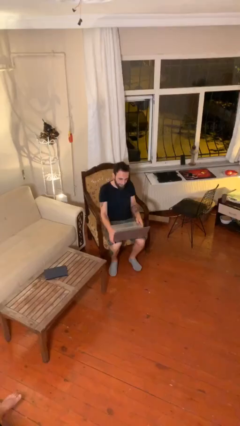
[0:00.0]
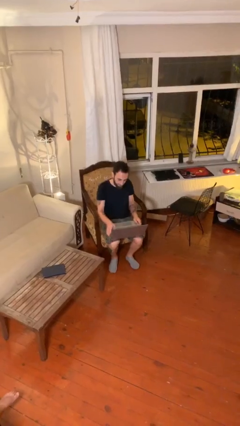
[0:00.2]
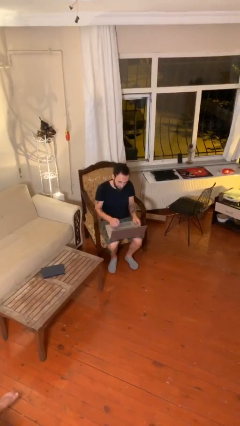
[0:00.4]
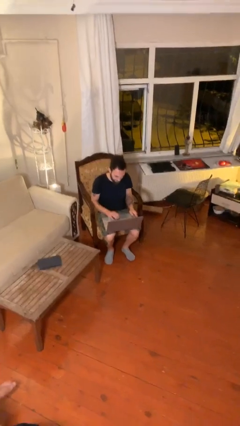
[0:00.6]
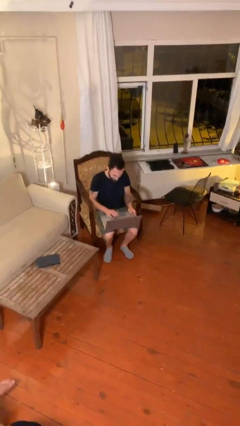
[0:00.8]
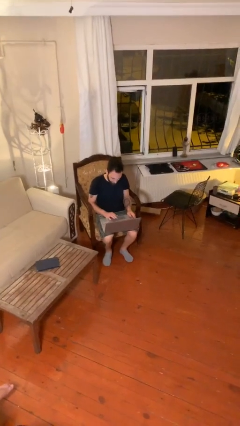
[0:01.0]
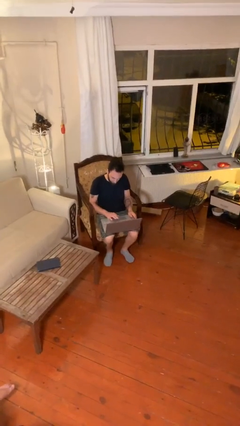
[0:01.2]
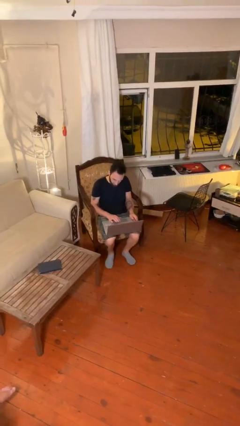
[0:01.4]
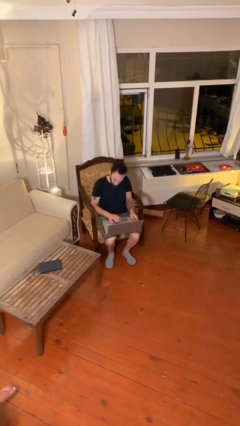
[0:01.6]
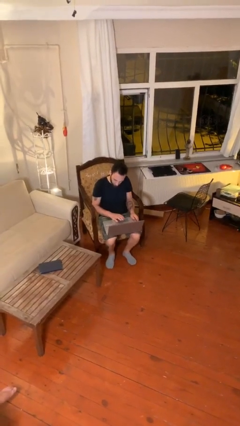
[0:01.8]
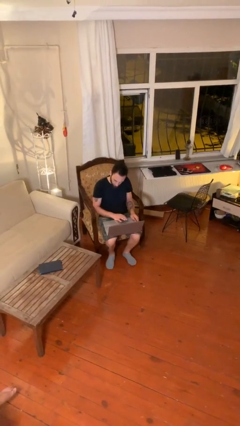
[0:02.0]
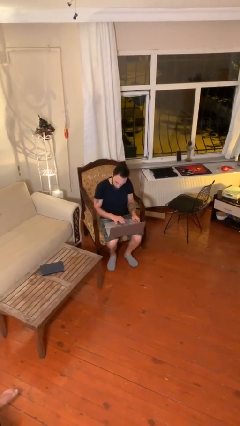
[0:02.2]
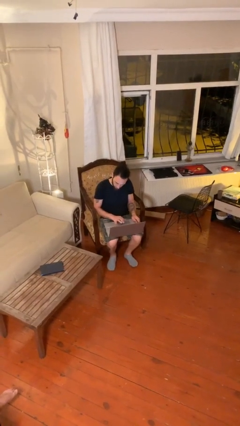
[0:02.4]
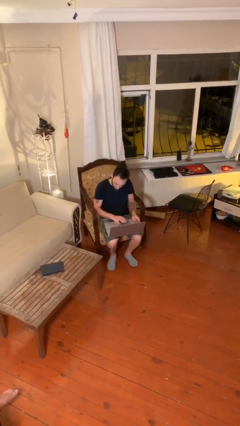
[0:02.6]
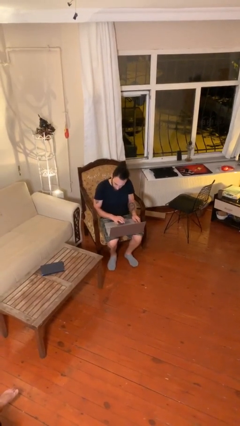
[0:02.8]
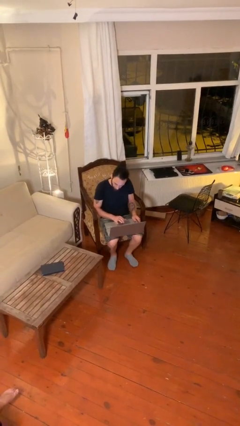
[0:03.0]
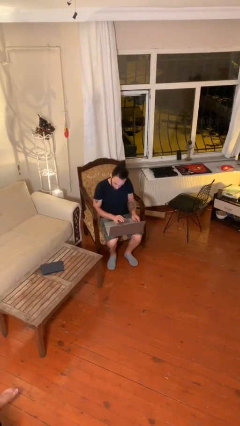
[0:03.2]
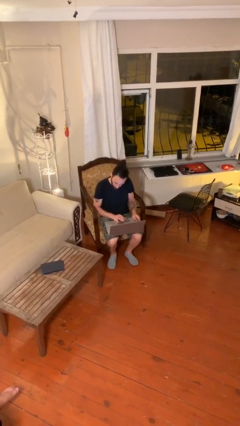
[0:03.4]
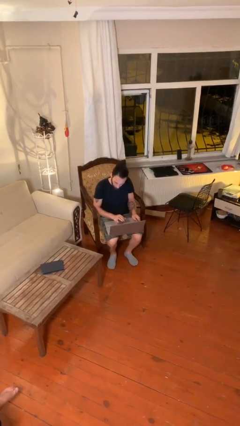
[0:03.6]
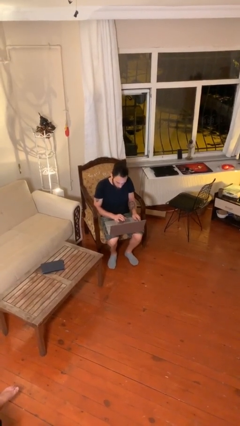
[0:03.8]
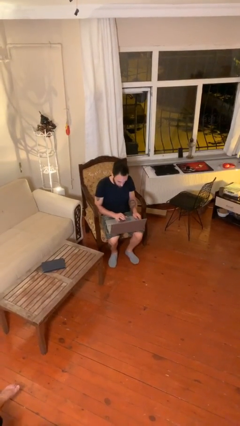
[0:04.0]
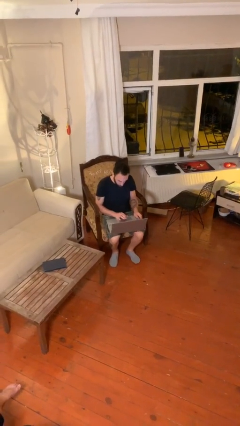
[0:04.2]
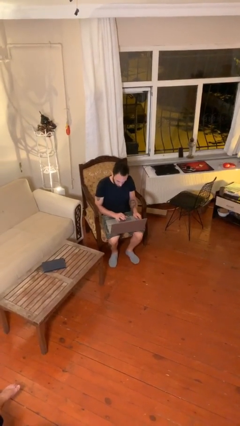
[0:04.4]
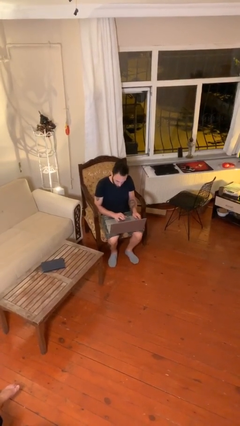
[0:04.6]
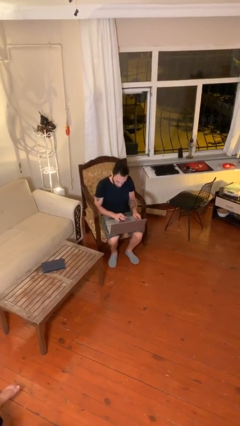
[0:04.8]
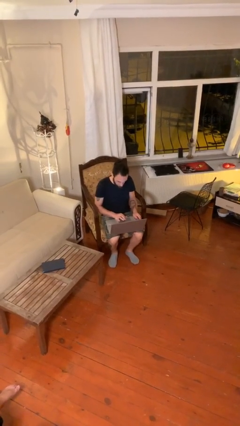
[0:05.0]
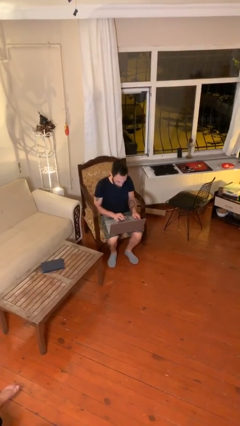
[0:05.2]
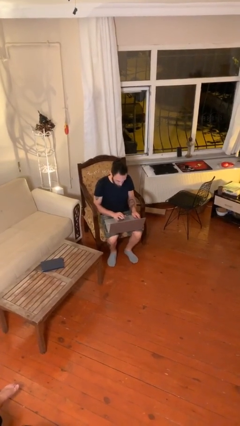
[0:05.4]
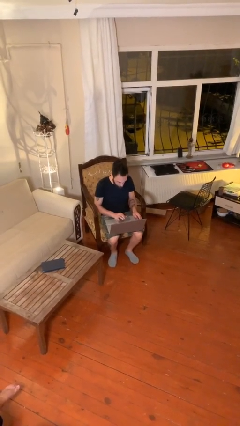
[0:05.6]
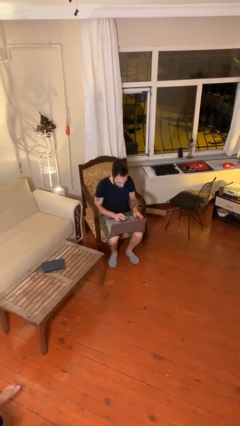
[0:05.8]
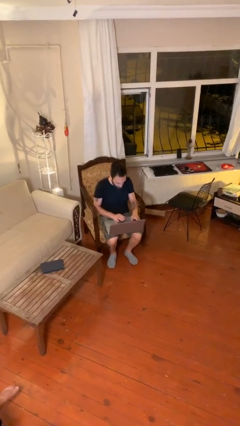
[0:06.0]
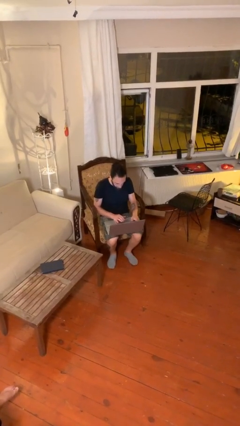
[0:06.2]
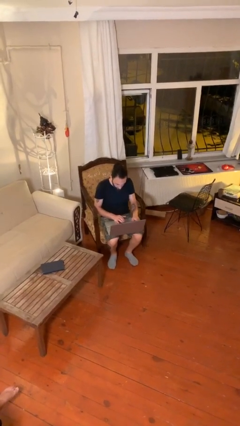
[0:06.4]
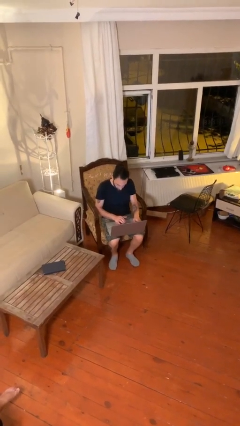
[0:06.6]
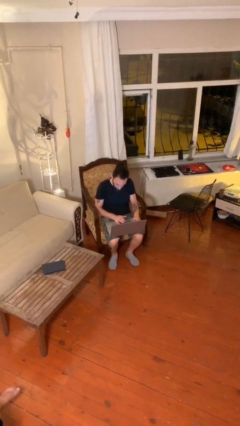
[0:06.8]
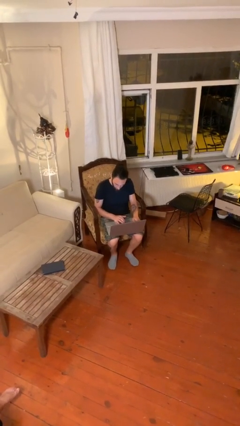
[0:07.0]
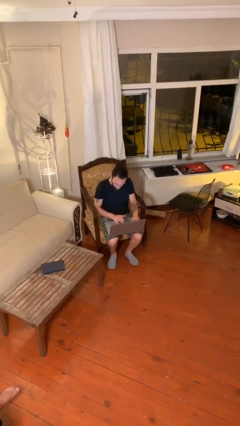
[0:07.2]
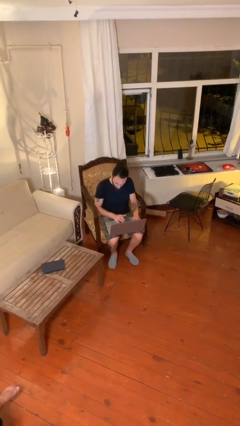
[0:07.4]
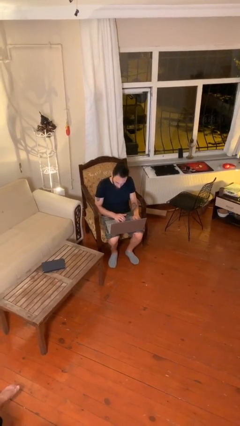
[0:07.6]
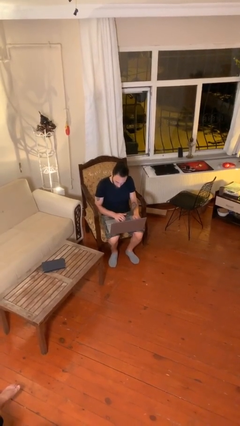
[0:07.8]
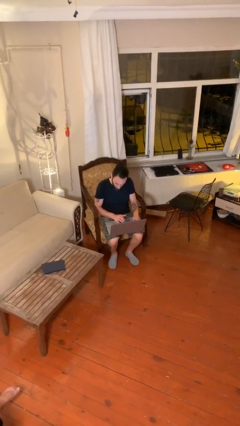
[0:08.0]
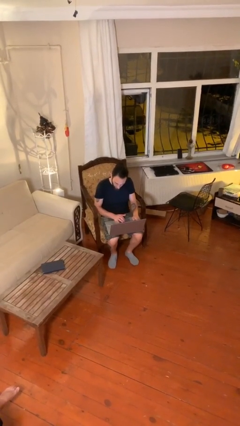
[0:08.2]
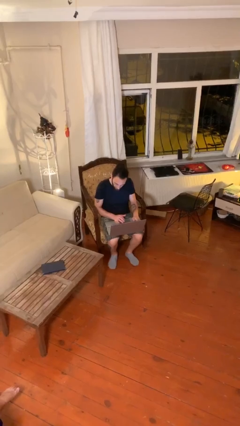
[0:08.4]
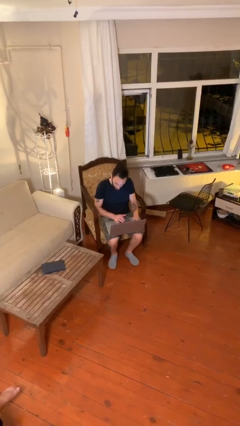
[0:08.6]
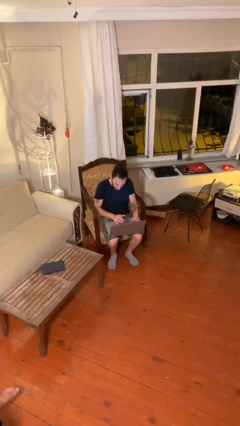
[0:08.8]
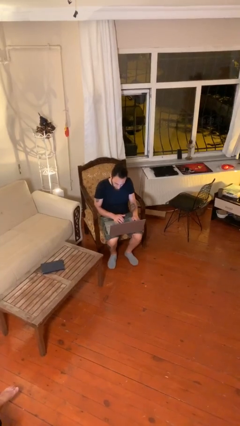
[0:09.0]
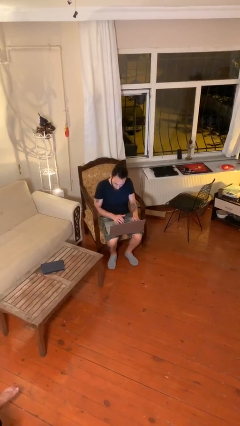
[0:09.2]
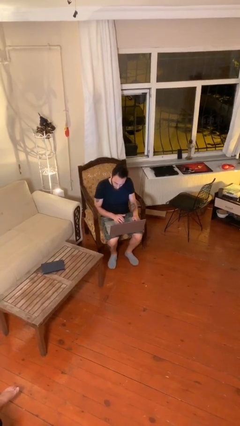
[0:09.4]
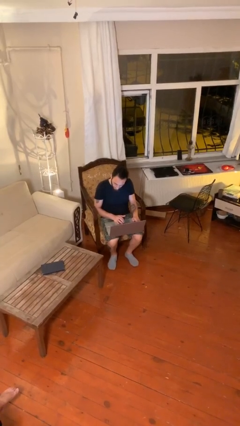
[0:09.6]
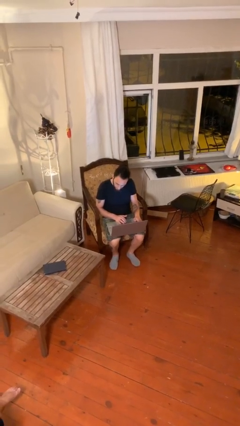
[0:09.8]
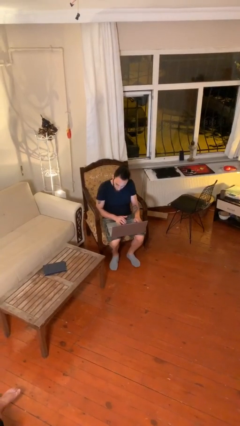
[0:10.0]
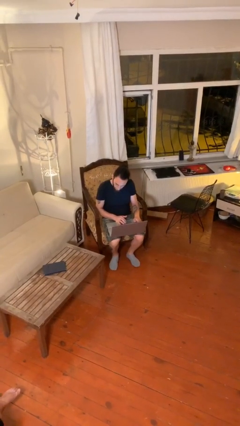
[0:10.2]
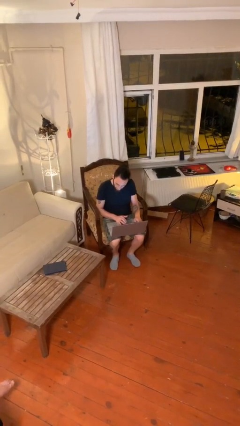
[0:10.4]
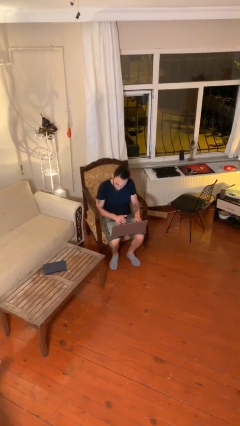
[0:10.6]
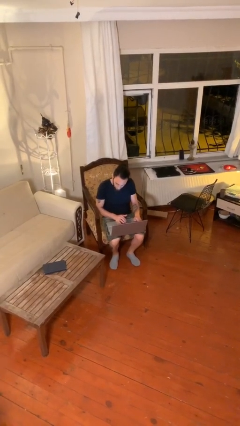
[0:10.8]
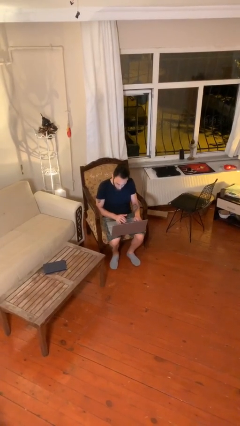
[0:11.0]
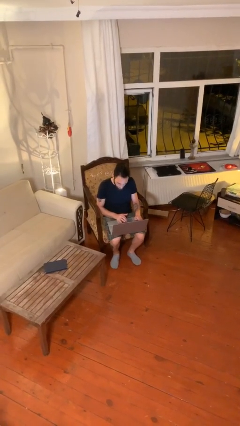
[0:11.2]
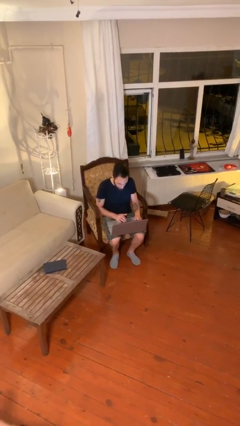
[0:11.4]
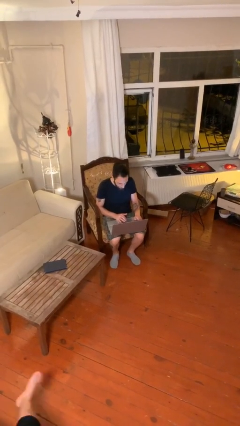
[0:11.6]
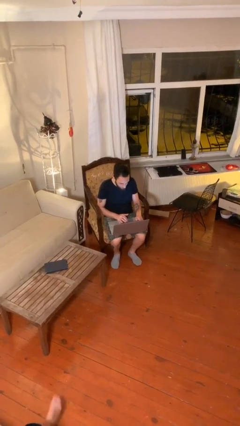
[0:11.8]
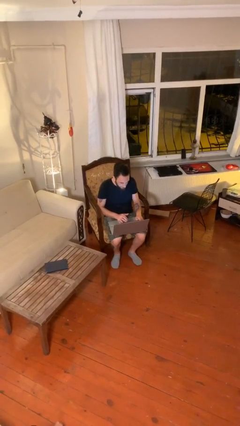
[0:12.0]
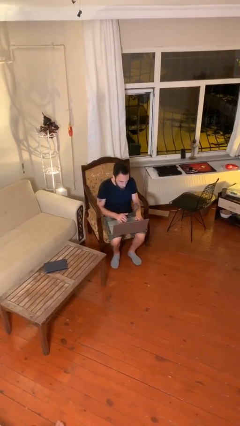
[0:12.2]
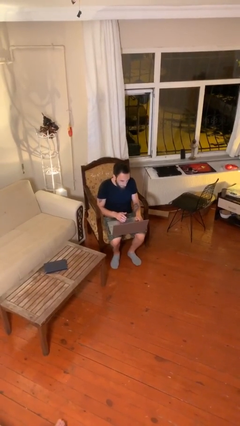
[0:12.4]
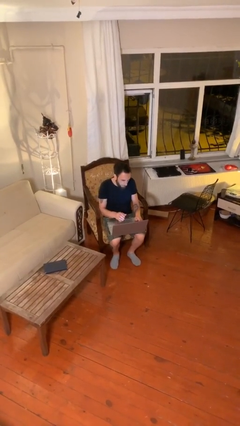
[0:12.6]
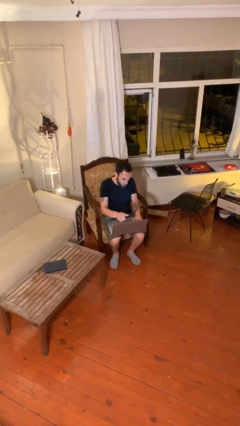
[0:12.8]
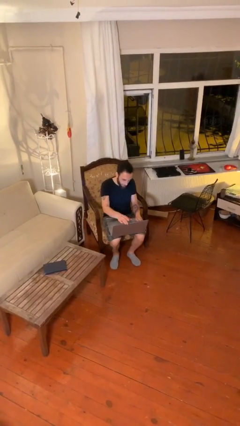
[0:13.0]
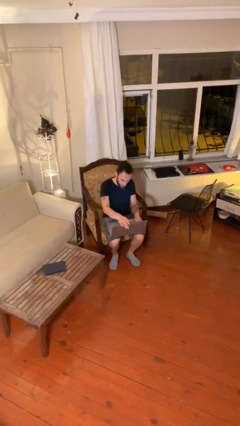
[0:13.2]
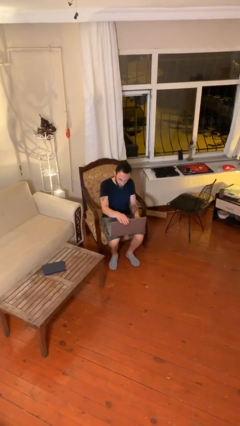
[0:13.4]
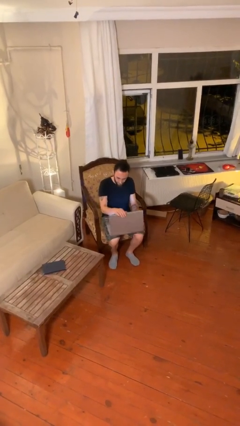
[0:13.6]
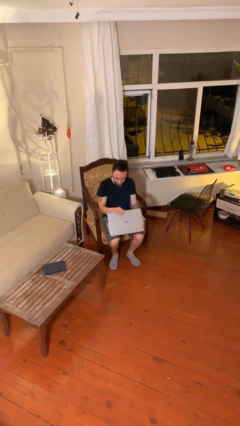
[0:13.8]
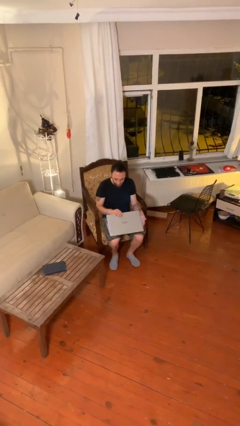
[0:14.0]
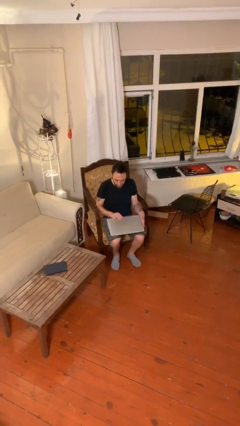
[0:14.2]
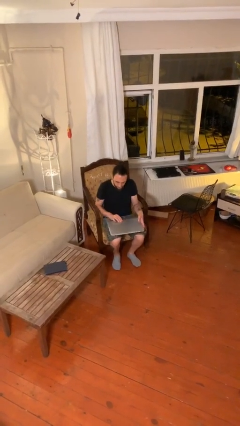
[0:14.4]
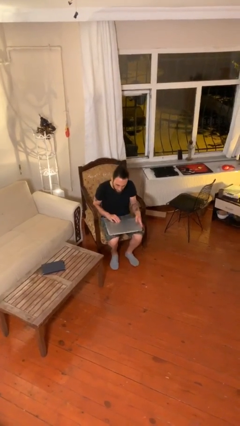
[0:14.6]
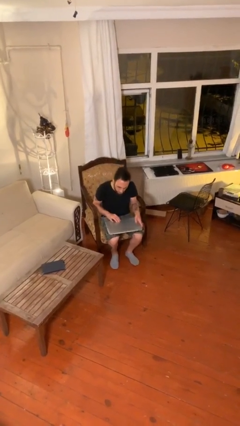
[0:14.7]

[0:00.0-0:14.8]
person interacts with laptop

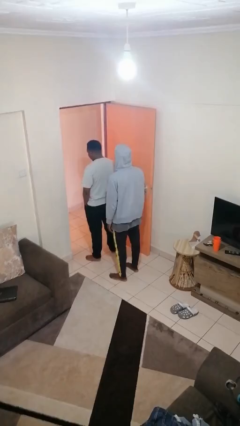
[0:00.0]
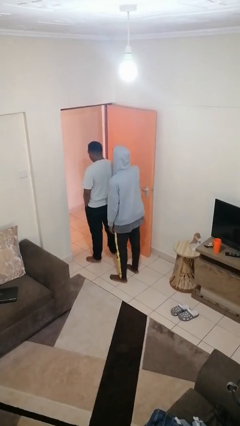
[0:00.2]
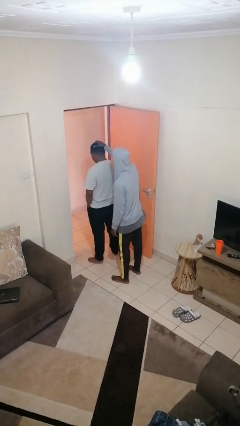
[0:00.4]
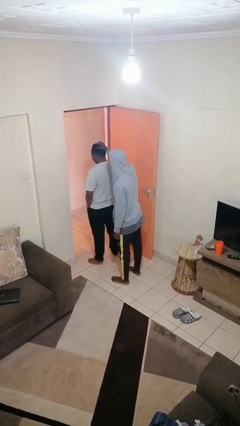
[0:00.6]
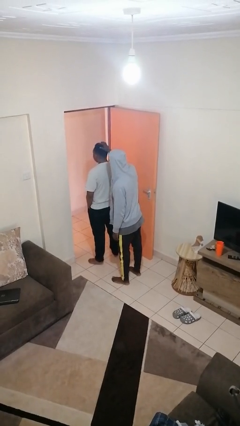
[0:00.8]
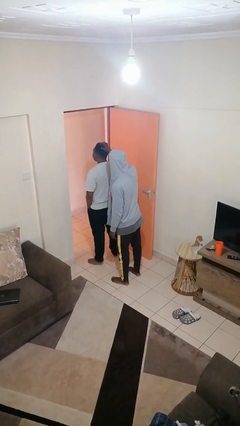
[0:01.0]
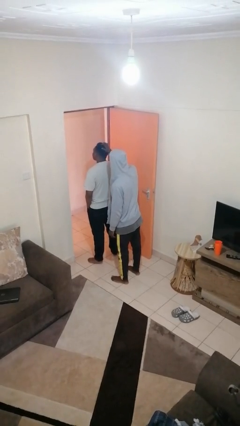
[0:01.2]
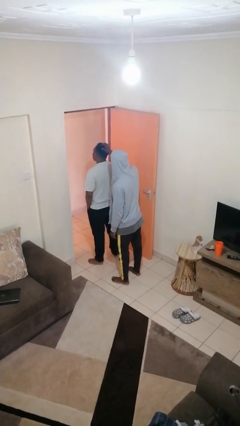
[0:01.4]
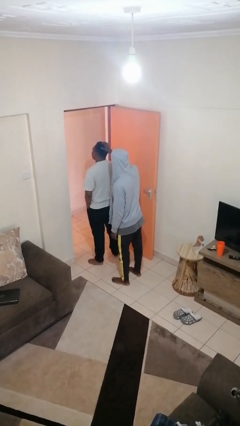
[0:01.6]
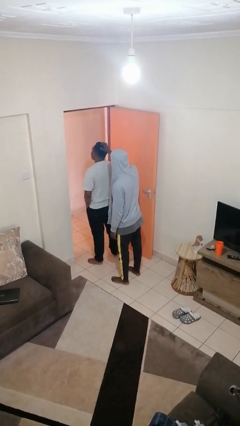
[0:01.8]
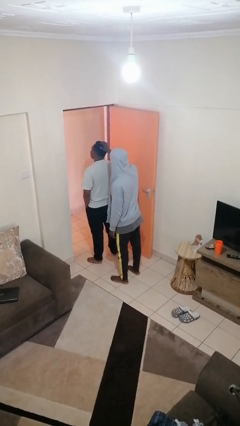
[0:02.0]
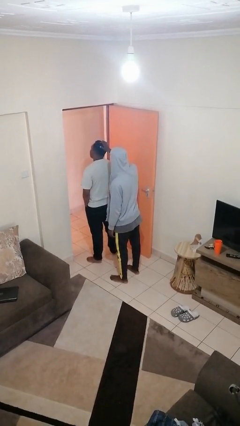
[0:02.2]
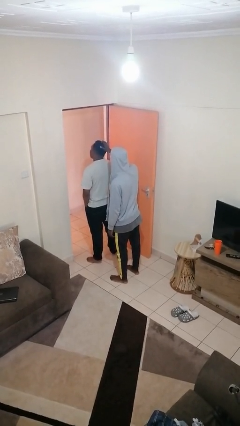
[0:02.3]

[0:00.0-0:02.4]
person grabs person by hair

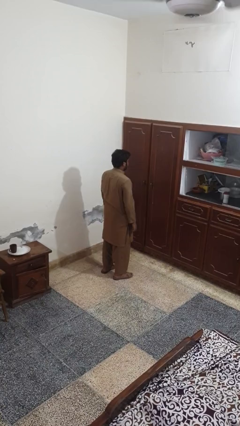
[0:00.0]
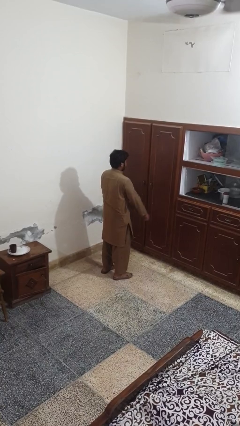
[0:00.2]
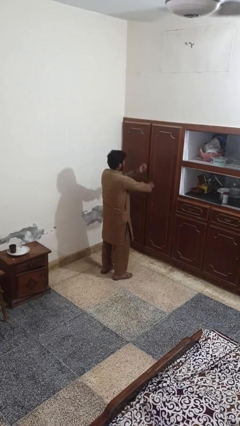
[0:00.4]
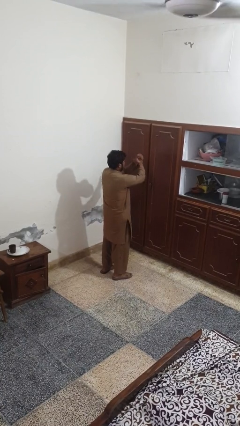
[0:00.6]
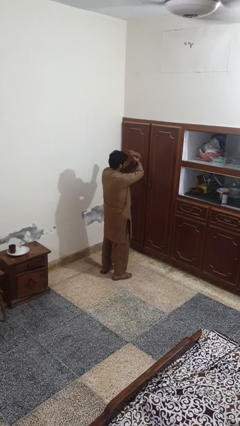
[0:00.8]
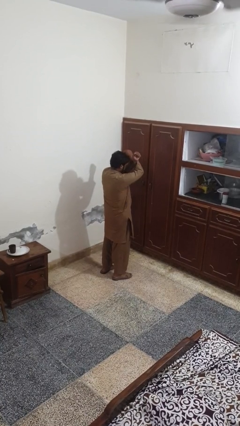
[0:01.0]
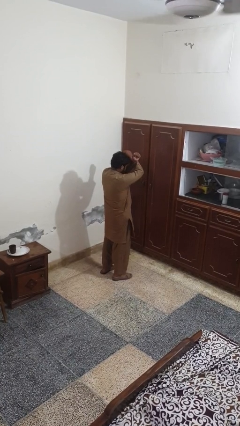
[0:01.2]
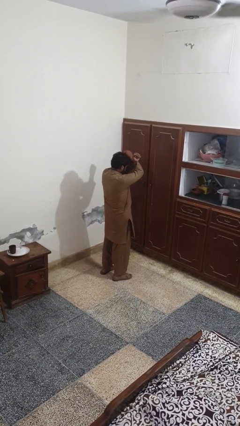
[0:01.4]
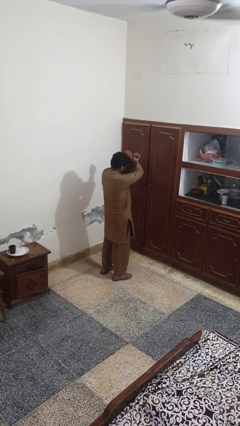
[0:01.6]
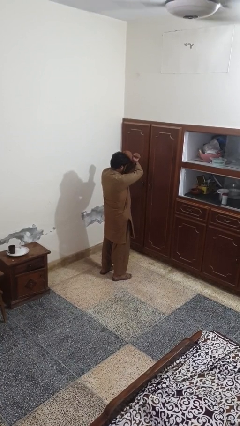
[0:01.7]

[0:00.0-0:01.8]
person gestures arms x
